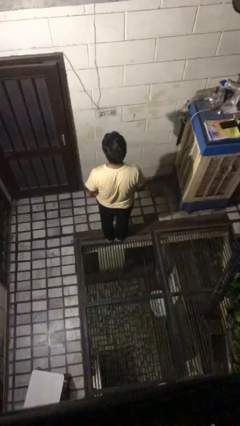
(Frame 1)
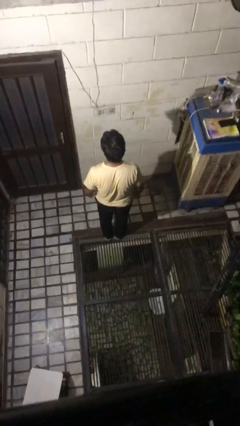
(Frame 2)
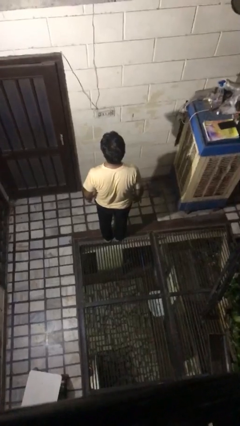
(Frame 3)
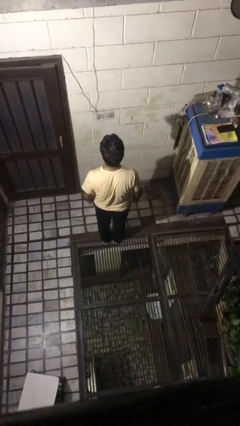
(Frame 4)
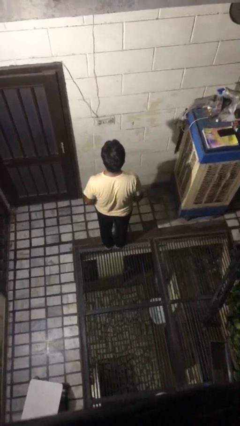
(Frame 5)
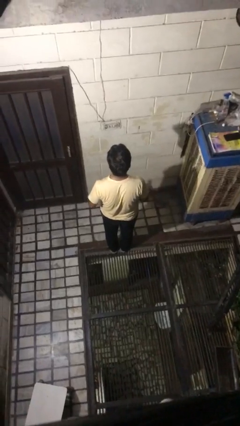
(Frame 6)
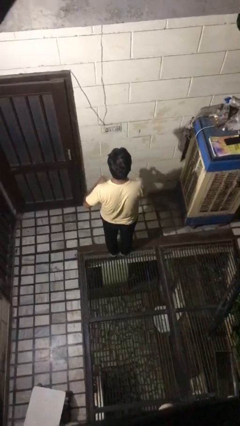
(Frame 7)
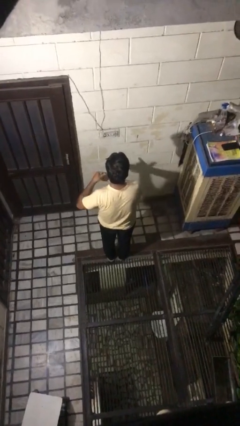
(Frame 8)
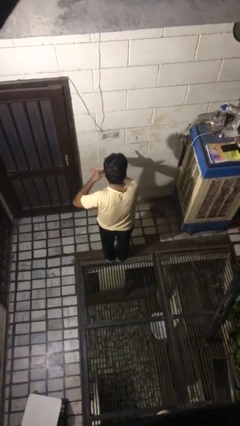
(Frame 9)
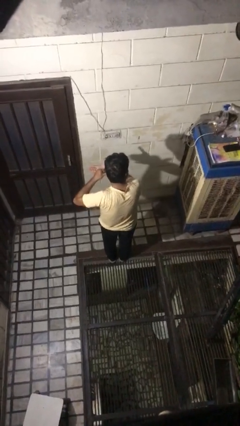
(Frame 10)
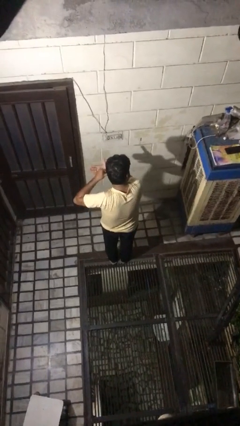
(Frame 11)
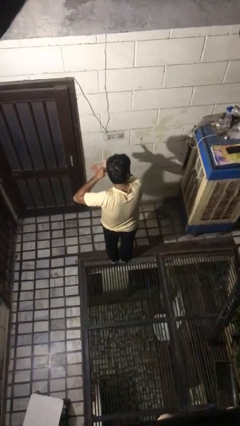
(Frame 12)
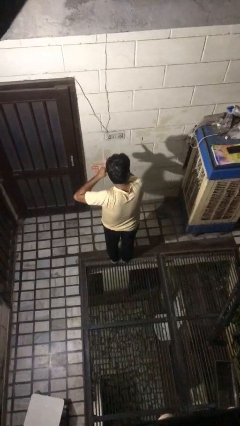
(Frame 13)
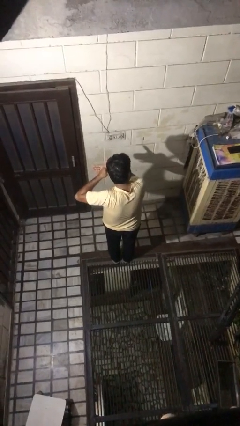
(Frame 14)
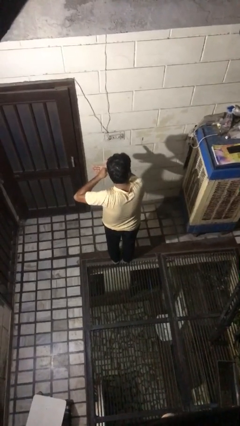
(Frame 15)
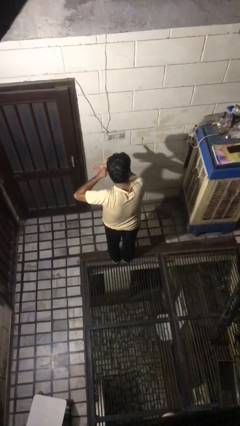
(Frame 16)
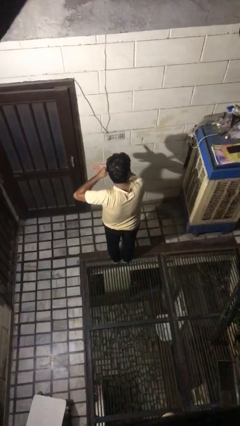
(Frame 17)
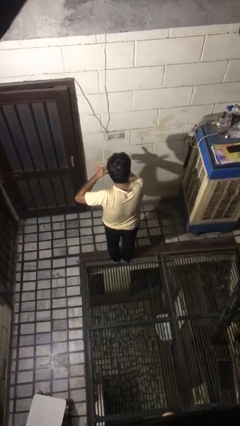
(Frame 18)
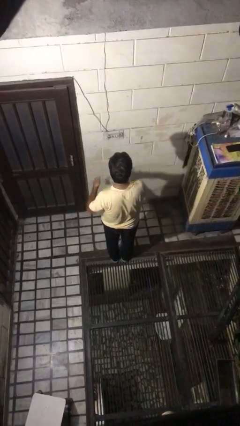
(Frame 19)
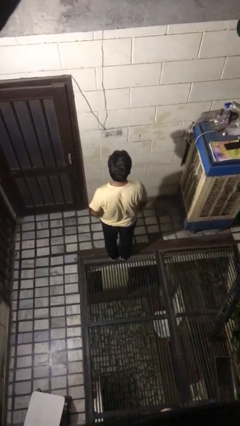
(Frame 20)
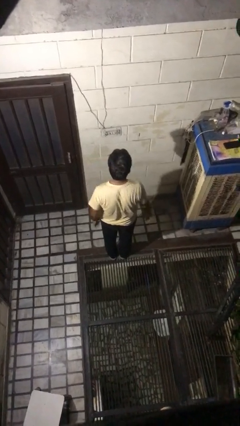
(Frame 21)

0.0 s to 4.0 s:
person gestures call me

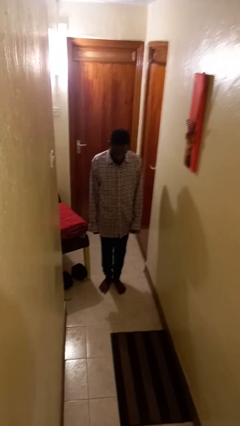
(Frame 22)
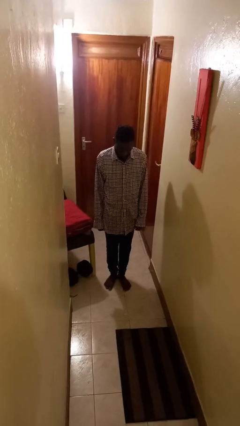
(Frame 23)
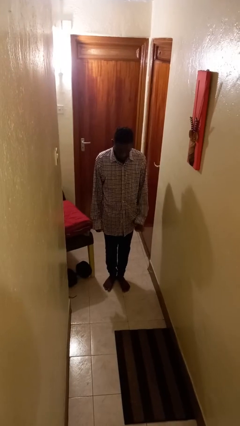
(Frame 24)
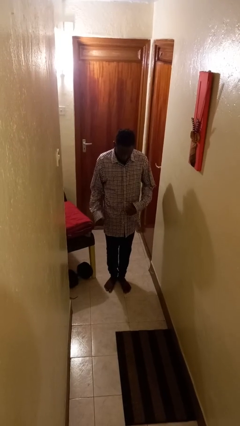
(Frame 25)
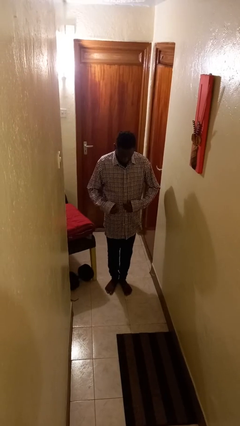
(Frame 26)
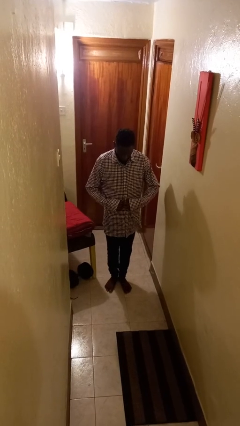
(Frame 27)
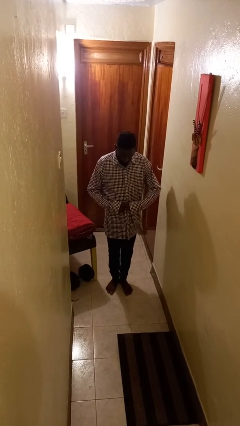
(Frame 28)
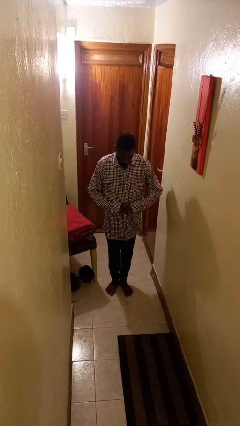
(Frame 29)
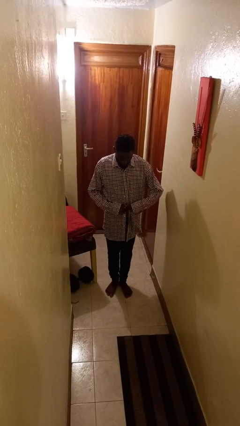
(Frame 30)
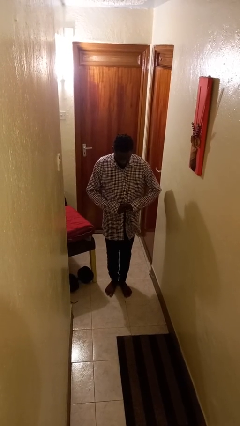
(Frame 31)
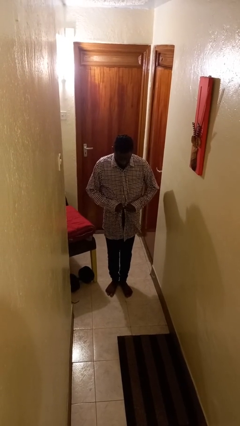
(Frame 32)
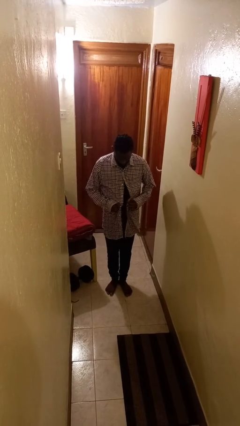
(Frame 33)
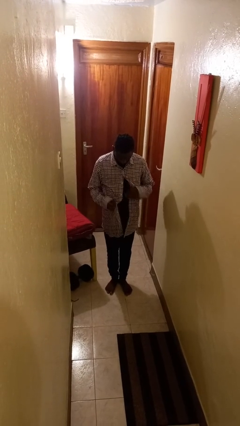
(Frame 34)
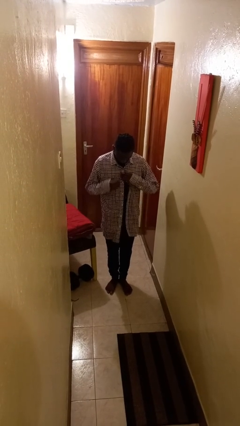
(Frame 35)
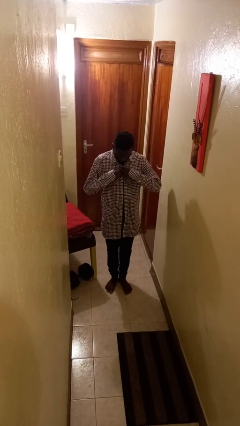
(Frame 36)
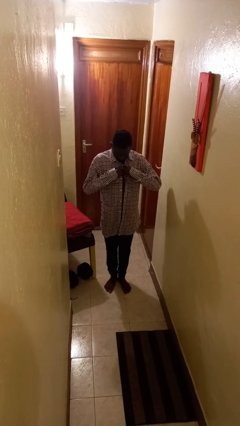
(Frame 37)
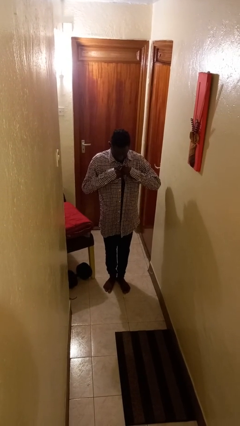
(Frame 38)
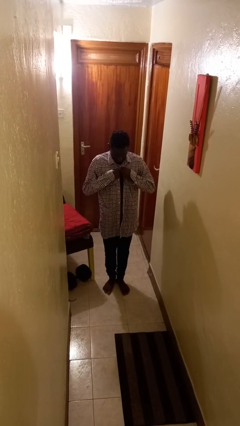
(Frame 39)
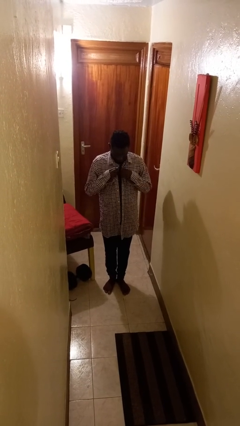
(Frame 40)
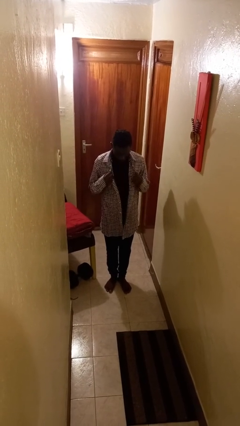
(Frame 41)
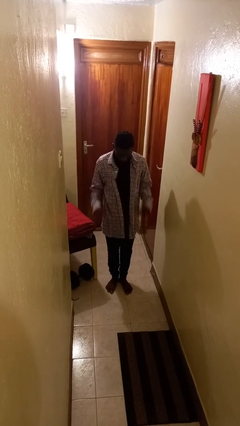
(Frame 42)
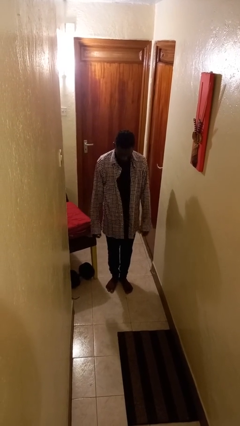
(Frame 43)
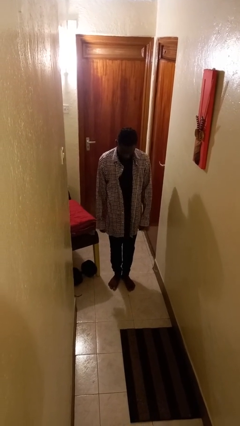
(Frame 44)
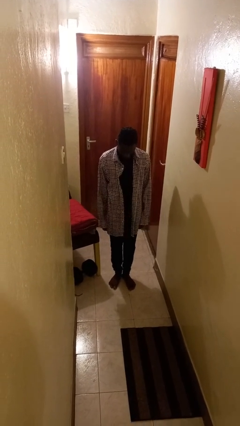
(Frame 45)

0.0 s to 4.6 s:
person unbuttons shirt

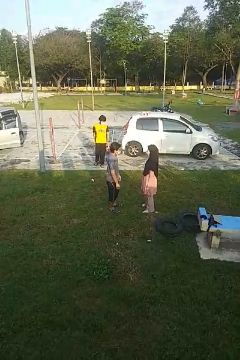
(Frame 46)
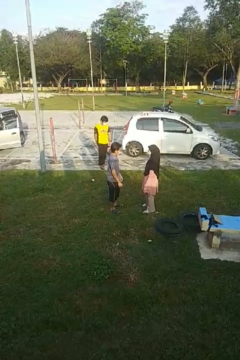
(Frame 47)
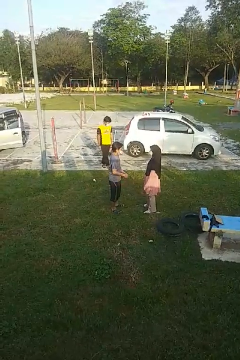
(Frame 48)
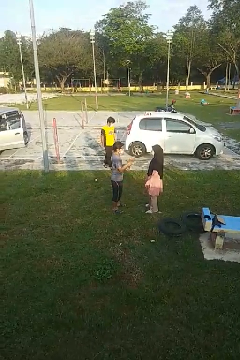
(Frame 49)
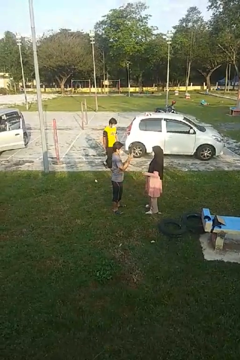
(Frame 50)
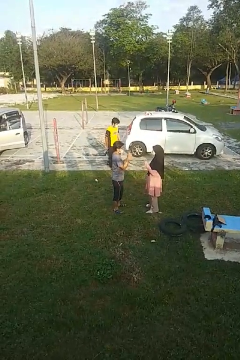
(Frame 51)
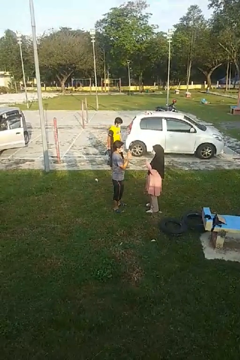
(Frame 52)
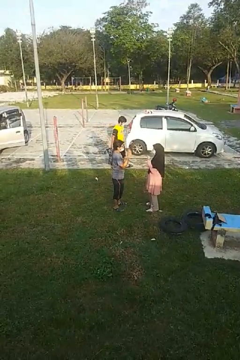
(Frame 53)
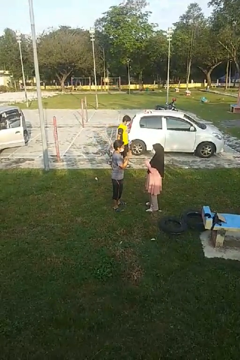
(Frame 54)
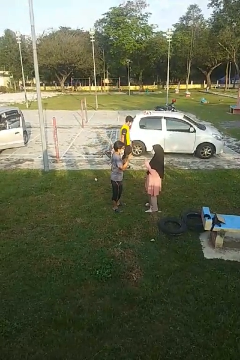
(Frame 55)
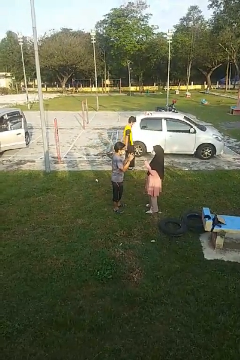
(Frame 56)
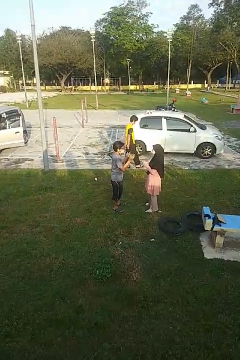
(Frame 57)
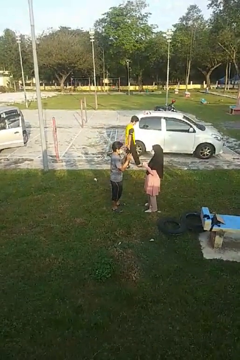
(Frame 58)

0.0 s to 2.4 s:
person talks to person

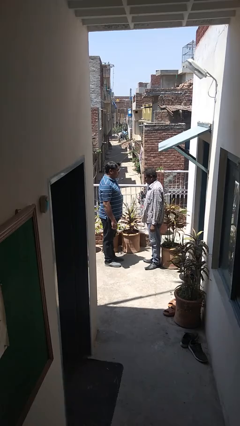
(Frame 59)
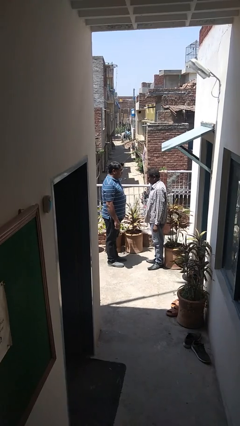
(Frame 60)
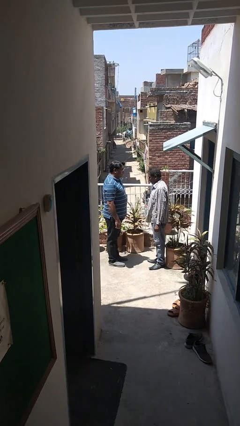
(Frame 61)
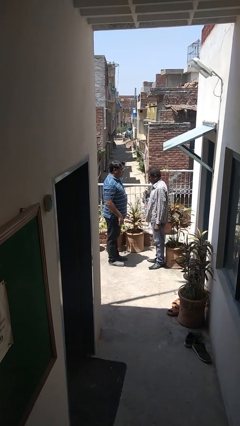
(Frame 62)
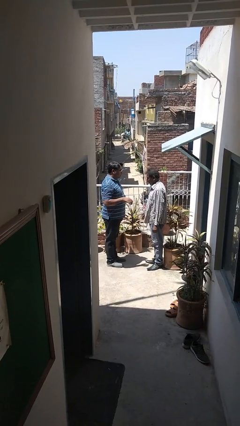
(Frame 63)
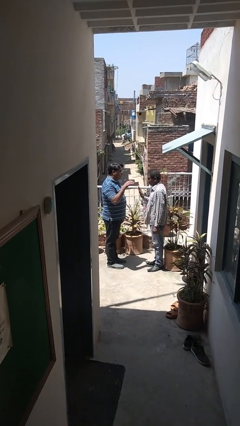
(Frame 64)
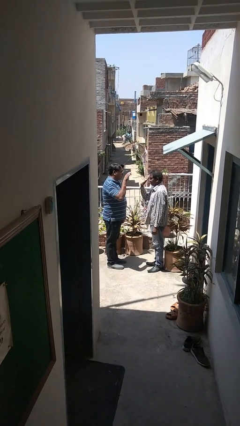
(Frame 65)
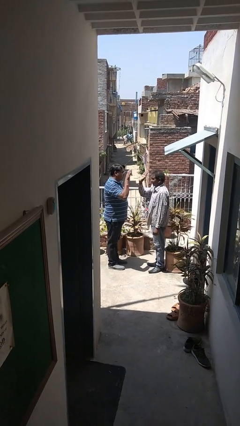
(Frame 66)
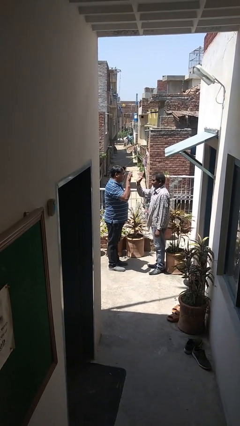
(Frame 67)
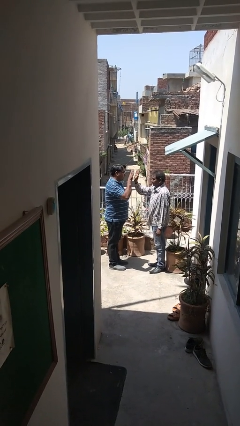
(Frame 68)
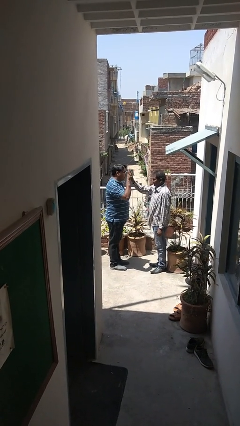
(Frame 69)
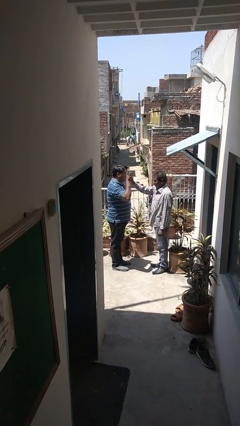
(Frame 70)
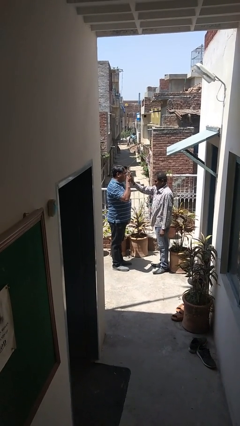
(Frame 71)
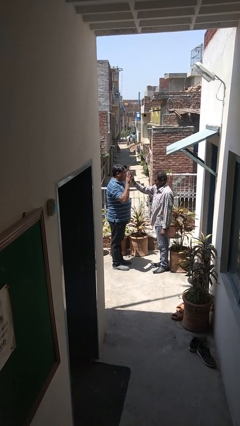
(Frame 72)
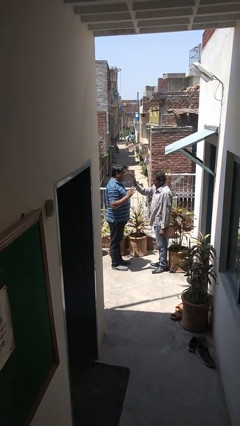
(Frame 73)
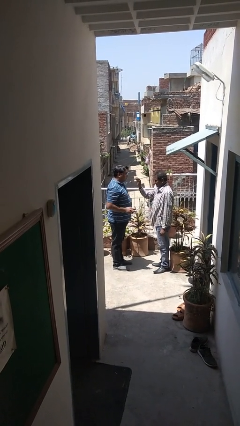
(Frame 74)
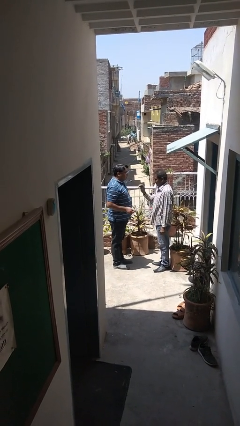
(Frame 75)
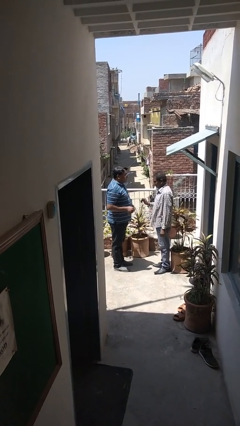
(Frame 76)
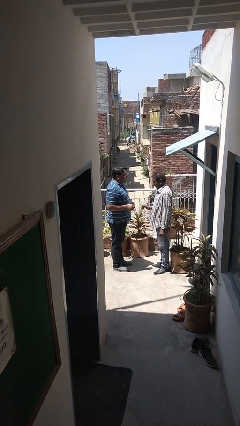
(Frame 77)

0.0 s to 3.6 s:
person highfives hand

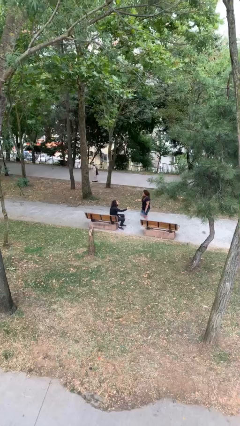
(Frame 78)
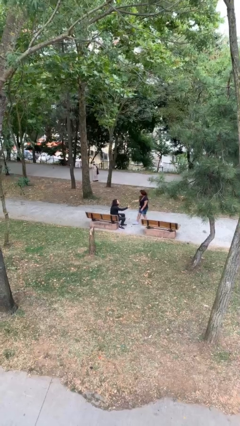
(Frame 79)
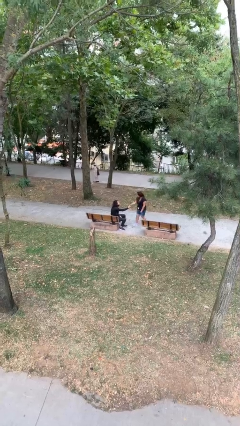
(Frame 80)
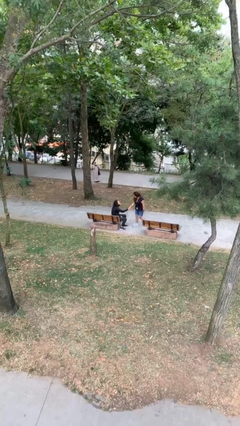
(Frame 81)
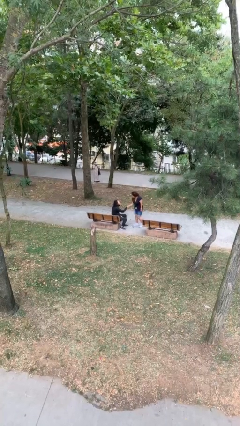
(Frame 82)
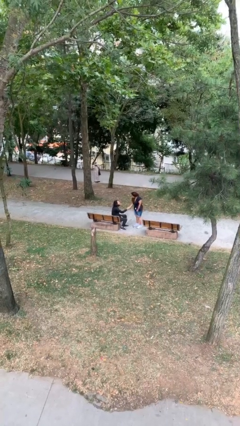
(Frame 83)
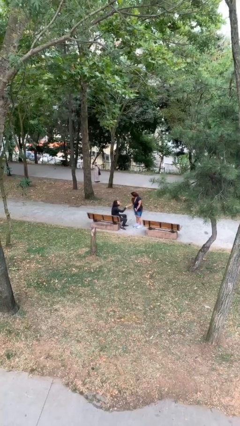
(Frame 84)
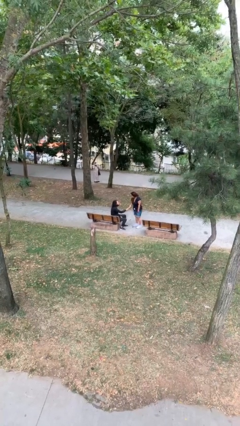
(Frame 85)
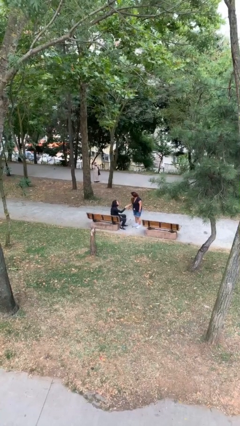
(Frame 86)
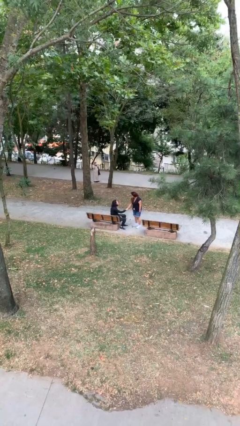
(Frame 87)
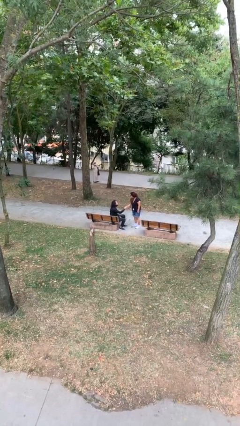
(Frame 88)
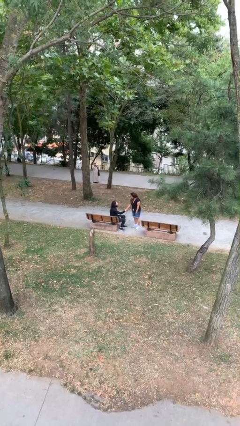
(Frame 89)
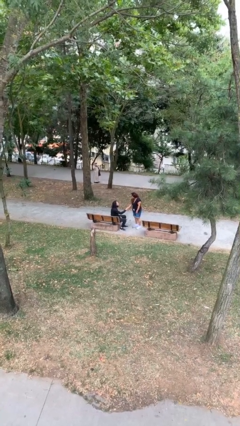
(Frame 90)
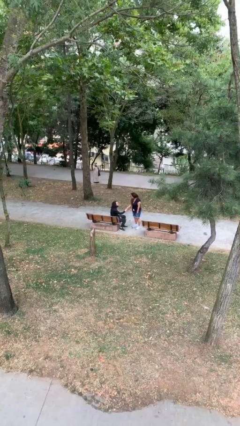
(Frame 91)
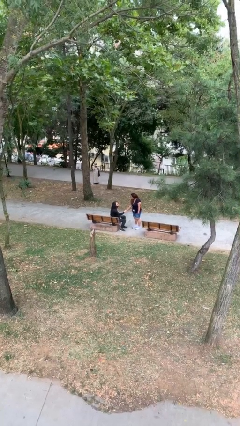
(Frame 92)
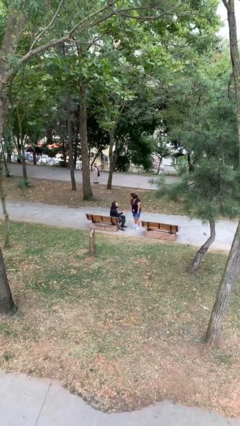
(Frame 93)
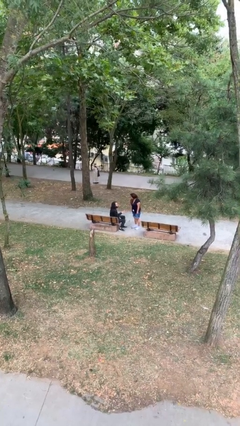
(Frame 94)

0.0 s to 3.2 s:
person shakes hand
